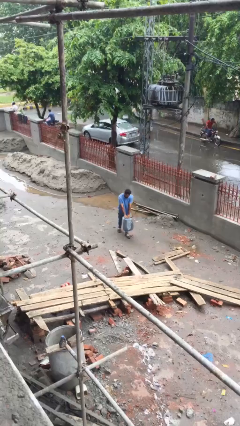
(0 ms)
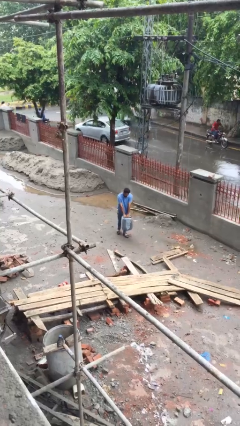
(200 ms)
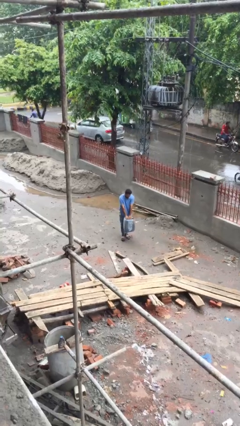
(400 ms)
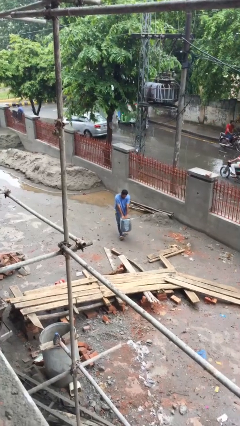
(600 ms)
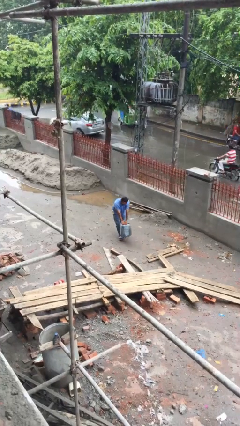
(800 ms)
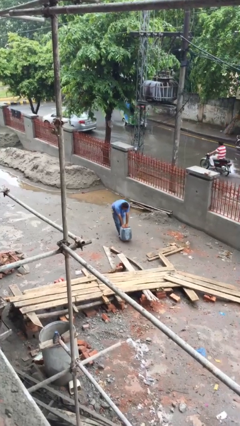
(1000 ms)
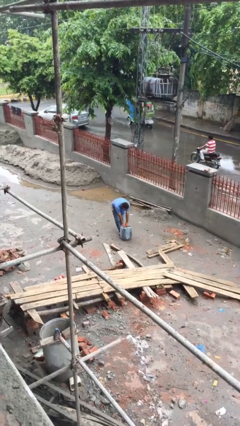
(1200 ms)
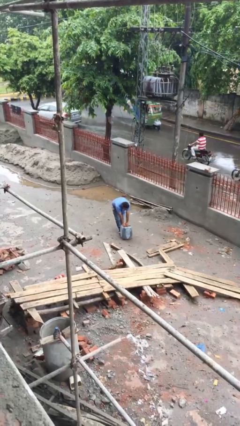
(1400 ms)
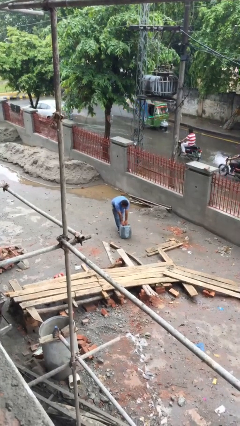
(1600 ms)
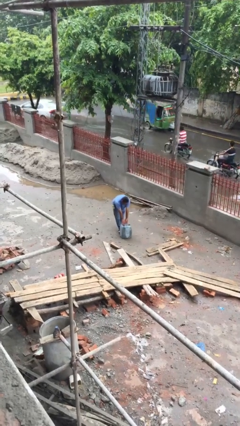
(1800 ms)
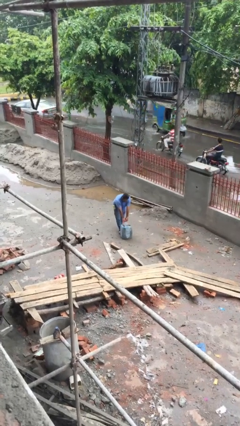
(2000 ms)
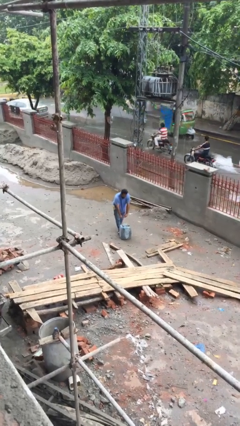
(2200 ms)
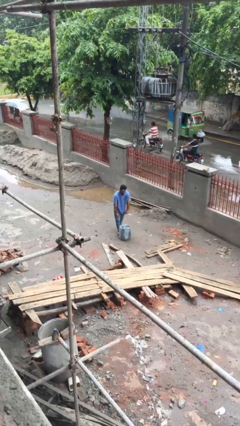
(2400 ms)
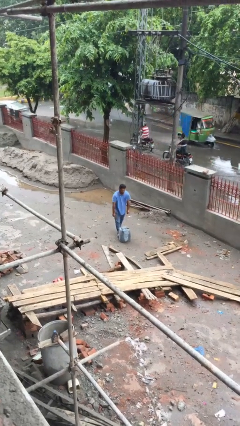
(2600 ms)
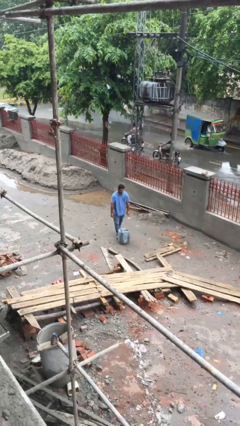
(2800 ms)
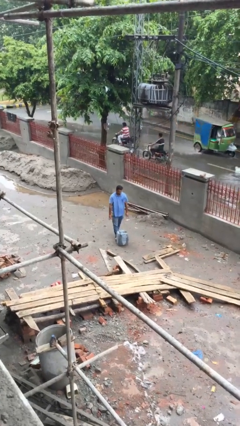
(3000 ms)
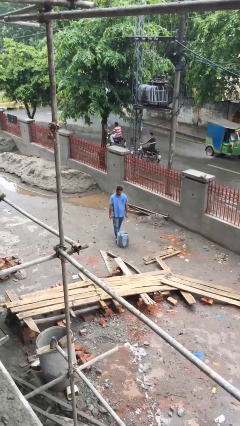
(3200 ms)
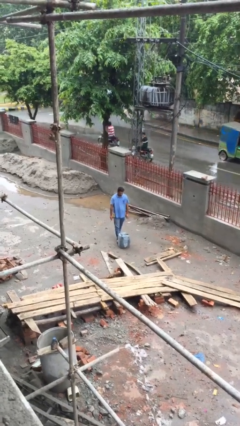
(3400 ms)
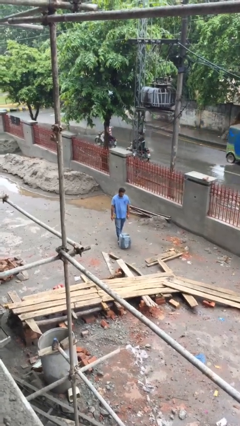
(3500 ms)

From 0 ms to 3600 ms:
person puts down object on floor

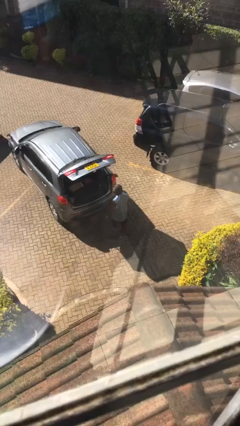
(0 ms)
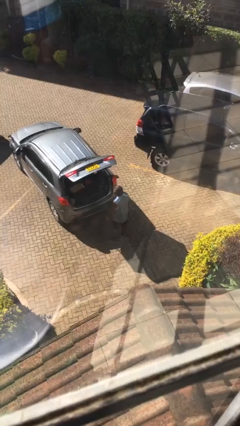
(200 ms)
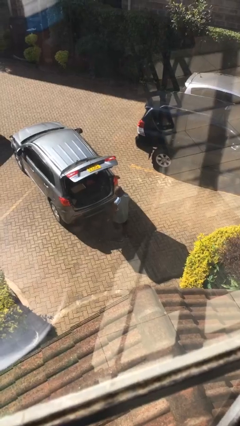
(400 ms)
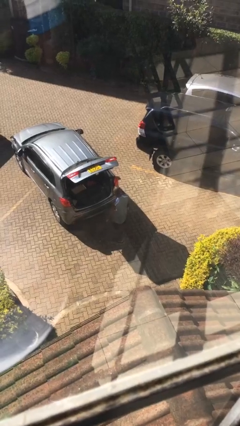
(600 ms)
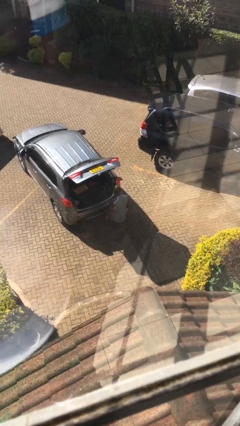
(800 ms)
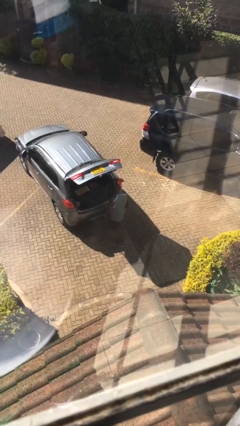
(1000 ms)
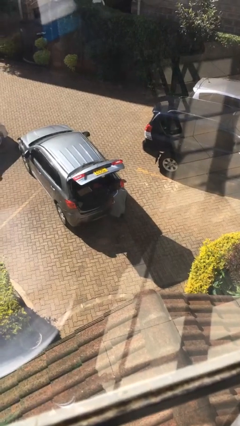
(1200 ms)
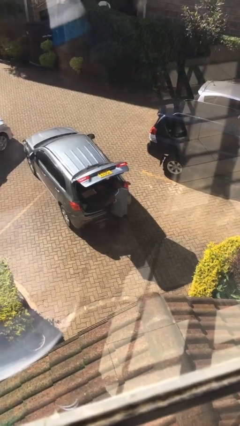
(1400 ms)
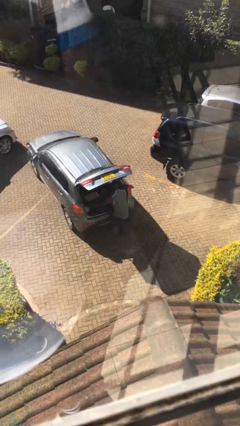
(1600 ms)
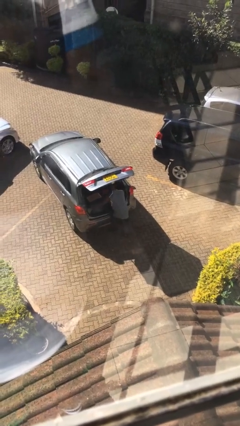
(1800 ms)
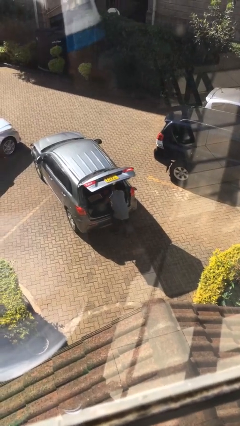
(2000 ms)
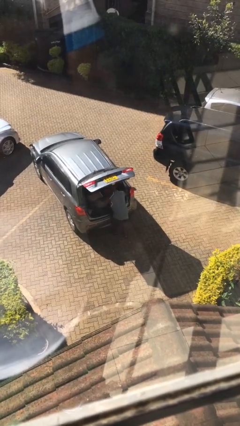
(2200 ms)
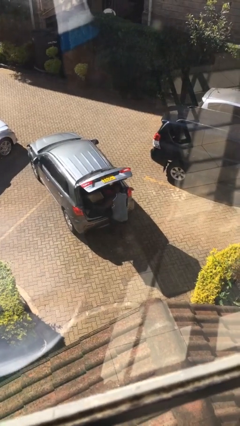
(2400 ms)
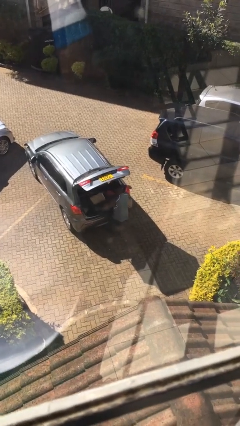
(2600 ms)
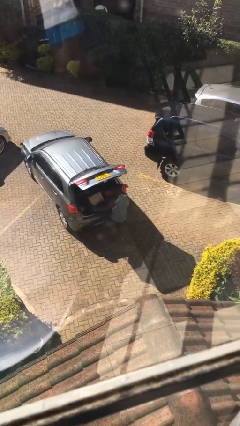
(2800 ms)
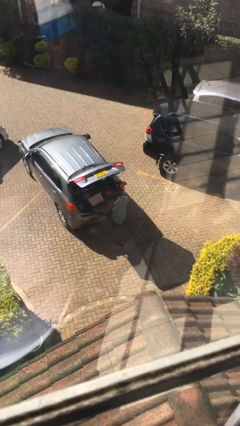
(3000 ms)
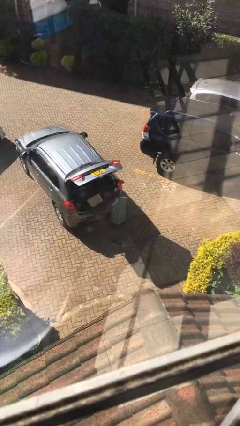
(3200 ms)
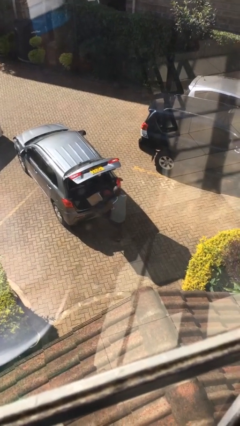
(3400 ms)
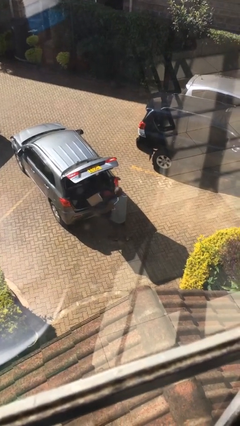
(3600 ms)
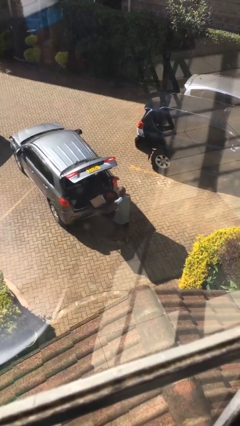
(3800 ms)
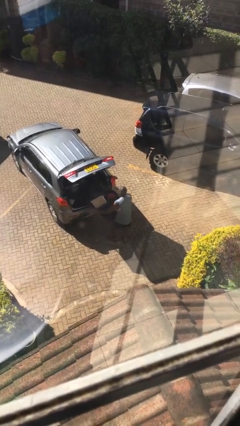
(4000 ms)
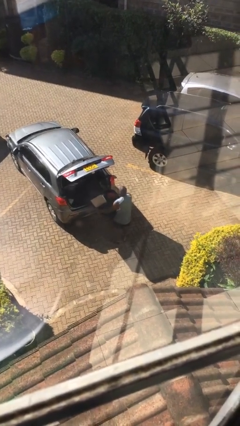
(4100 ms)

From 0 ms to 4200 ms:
person unloads car

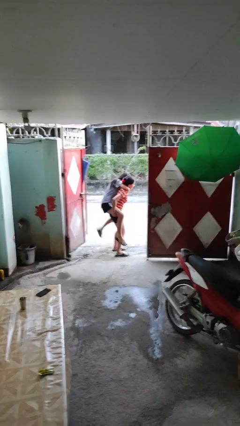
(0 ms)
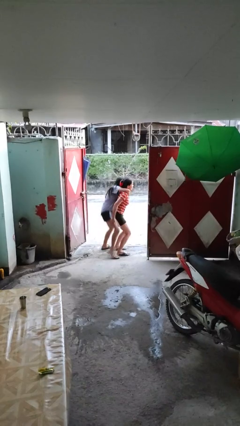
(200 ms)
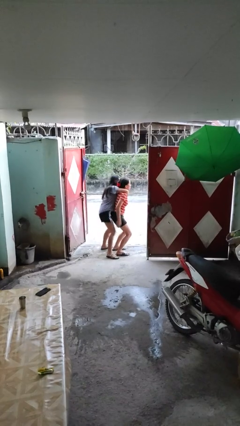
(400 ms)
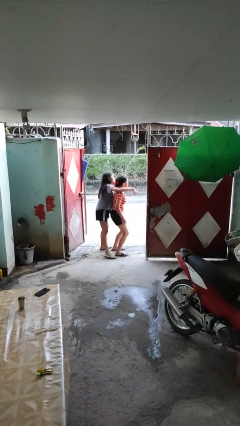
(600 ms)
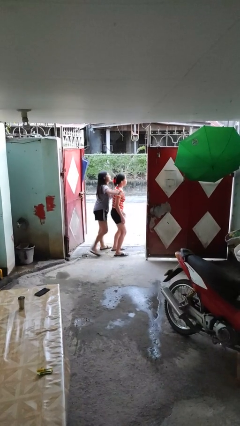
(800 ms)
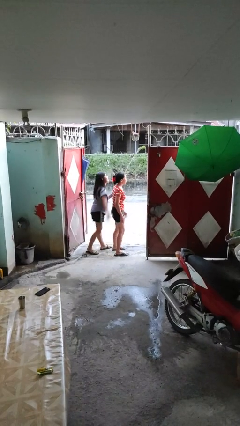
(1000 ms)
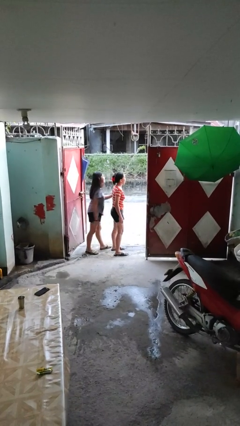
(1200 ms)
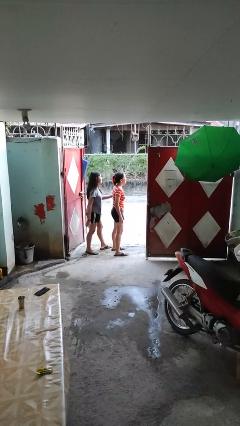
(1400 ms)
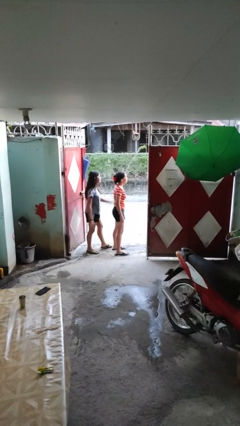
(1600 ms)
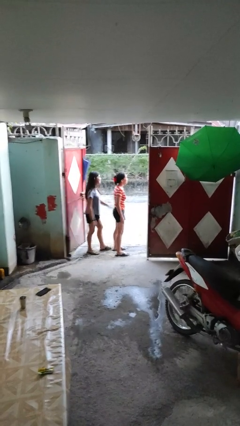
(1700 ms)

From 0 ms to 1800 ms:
person puts down person

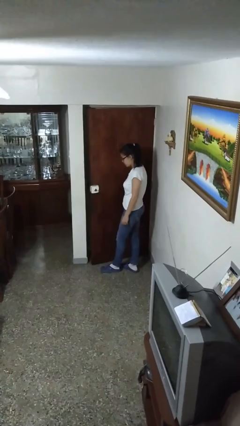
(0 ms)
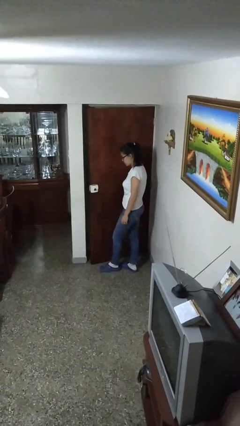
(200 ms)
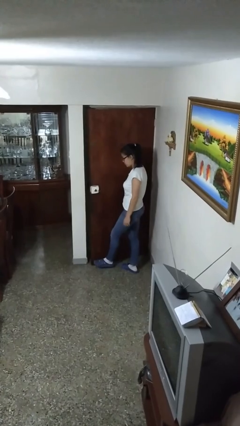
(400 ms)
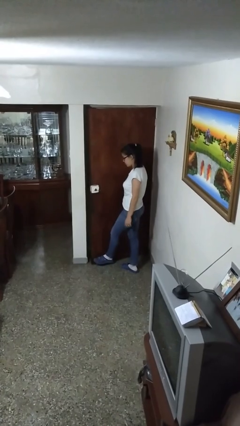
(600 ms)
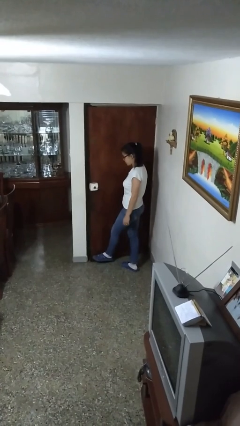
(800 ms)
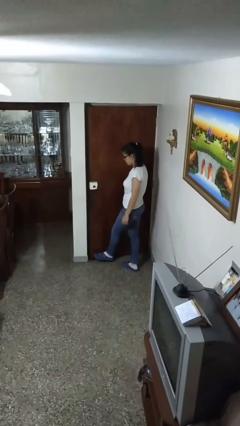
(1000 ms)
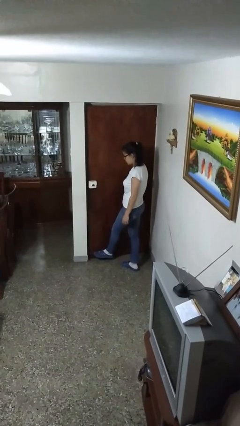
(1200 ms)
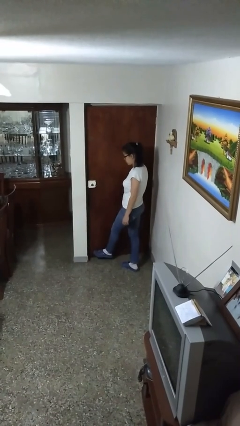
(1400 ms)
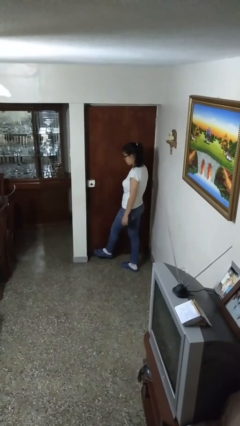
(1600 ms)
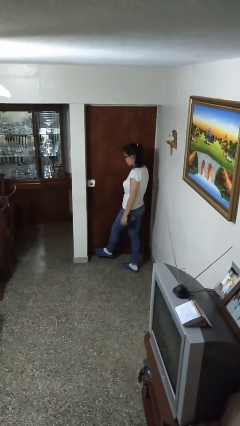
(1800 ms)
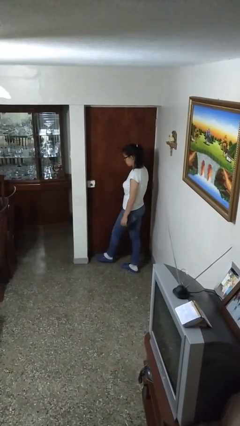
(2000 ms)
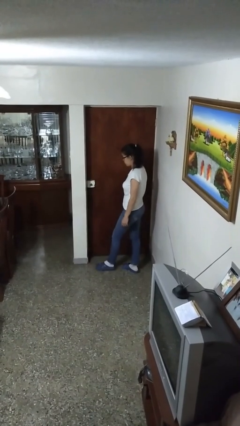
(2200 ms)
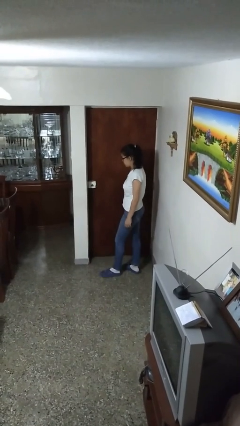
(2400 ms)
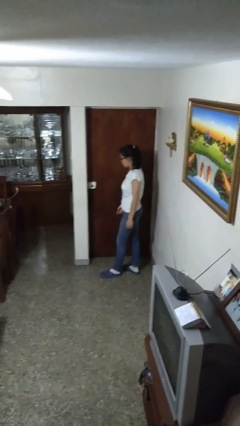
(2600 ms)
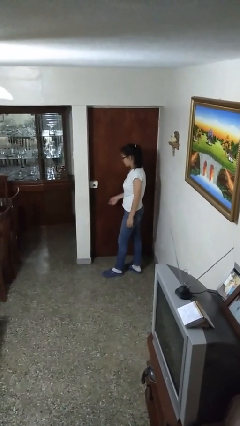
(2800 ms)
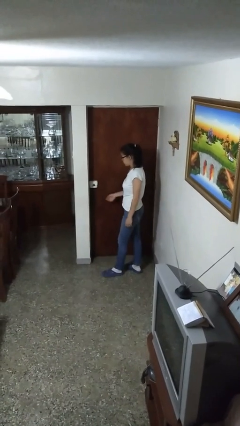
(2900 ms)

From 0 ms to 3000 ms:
person closes door with foot

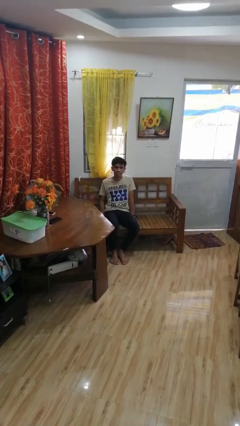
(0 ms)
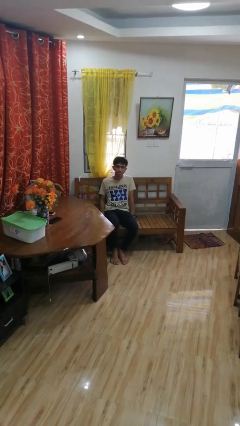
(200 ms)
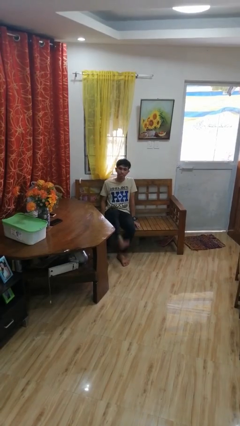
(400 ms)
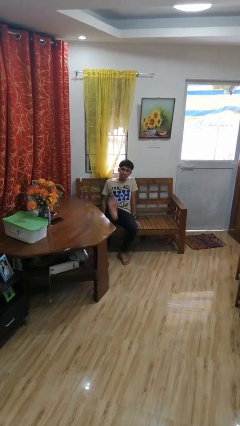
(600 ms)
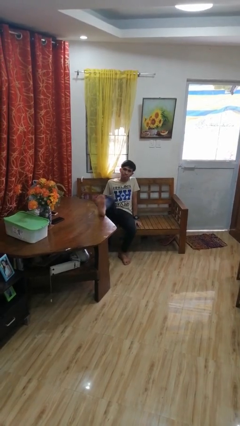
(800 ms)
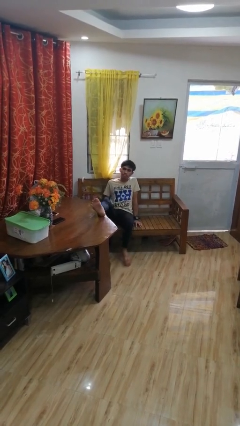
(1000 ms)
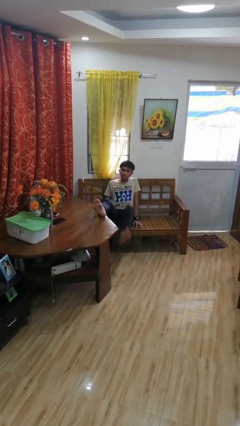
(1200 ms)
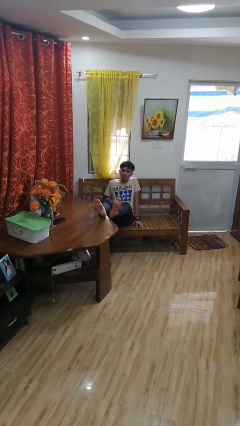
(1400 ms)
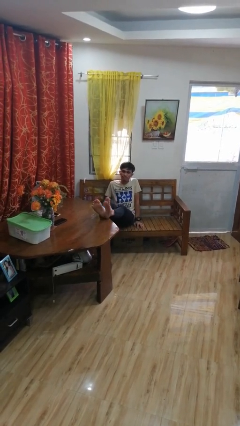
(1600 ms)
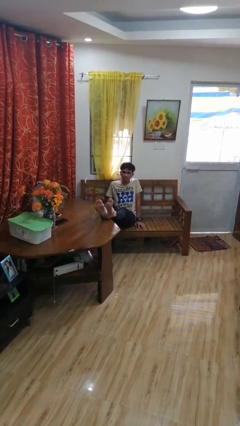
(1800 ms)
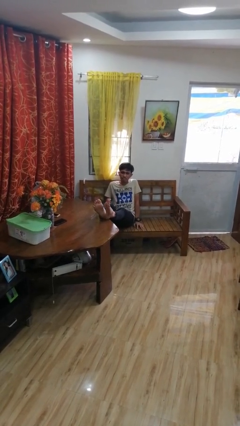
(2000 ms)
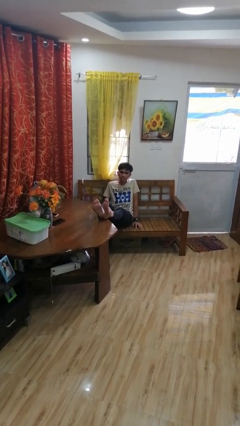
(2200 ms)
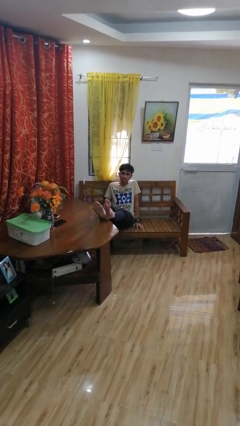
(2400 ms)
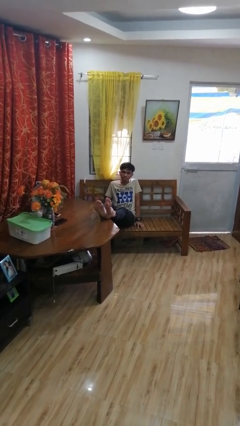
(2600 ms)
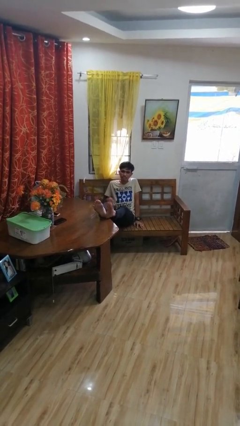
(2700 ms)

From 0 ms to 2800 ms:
person puts feet up

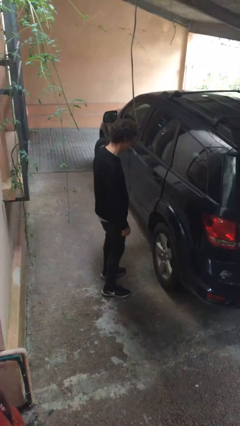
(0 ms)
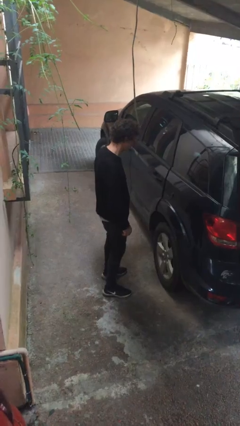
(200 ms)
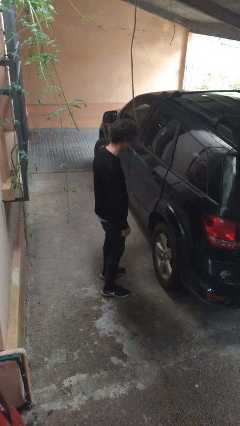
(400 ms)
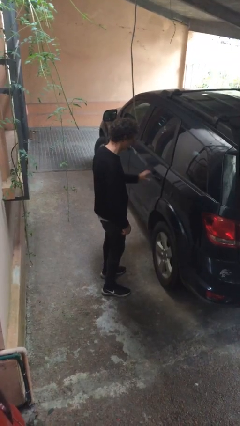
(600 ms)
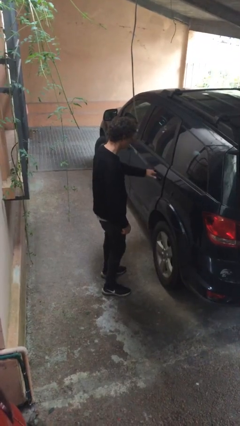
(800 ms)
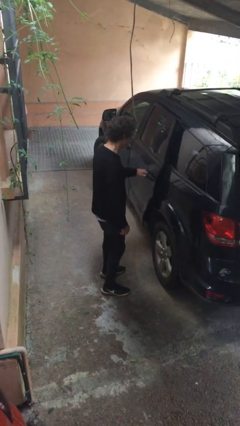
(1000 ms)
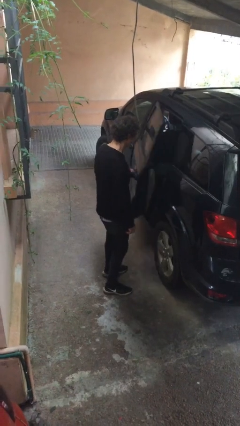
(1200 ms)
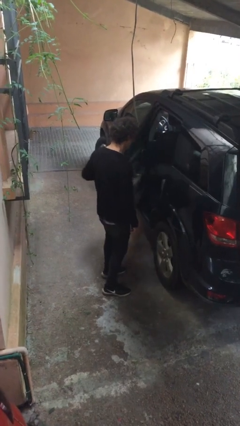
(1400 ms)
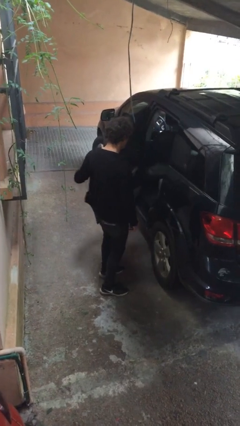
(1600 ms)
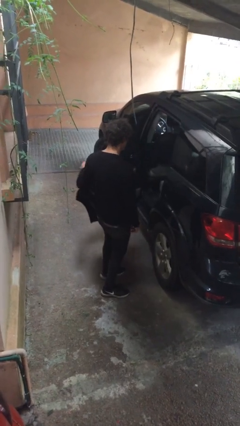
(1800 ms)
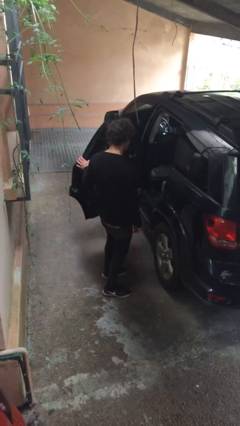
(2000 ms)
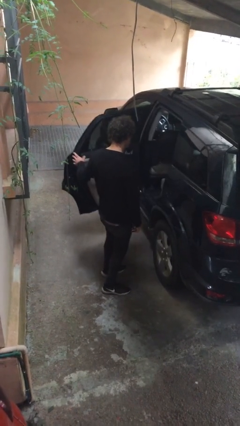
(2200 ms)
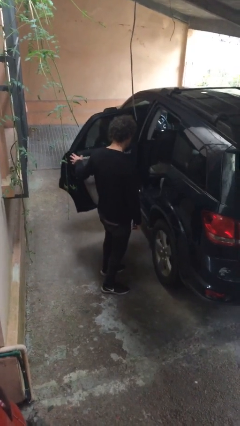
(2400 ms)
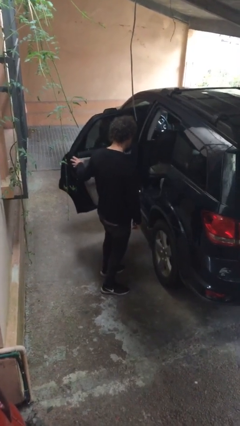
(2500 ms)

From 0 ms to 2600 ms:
person opens car door
